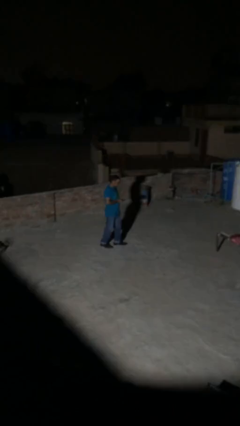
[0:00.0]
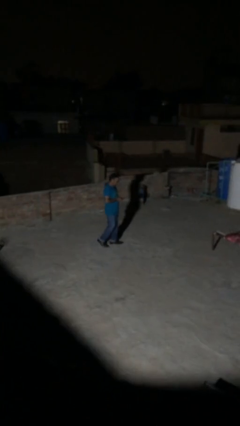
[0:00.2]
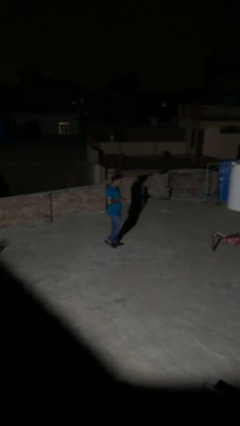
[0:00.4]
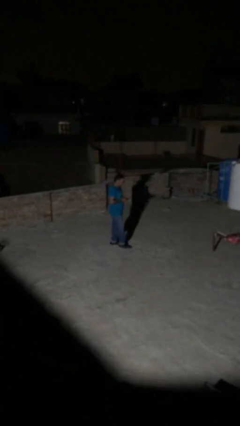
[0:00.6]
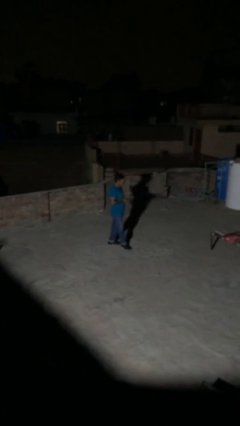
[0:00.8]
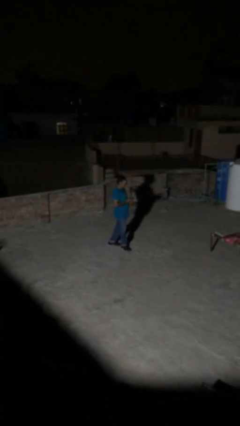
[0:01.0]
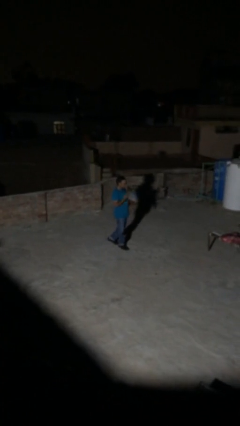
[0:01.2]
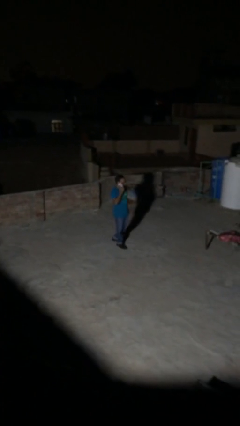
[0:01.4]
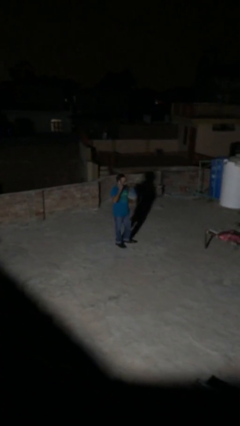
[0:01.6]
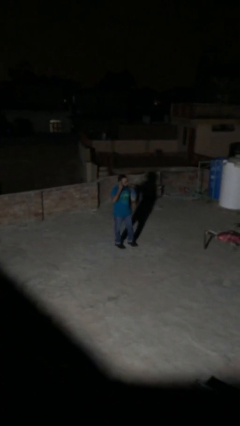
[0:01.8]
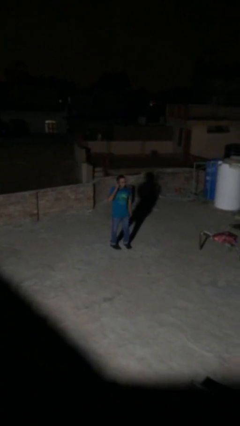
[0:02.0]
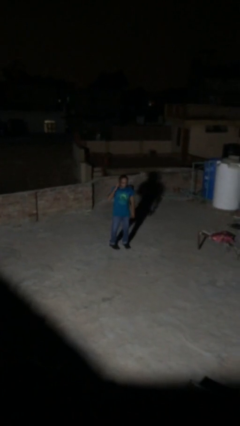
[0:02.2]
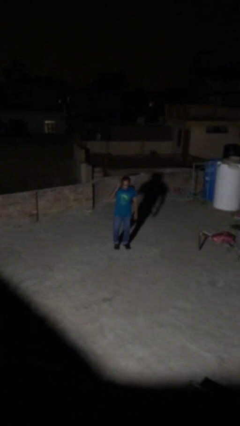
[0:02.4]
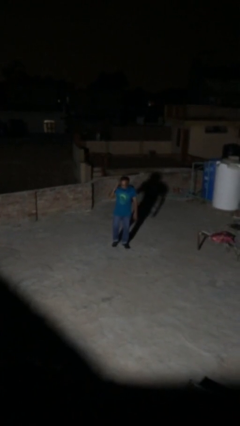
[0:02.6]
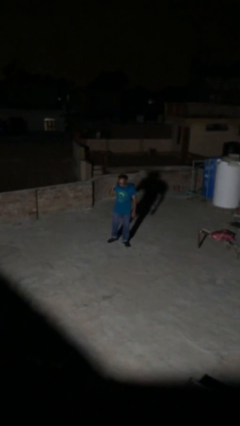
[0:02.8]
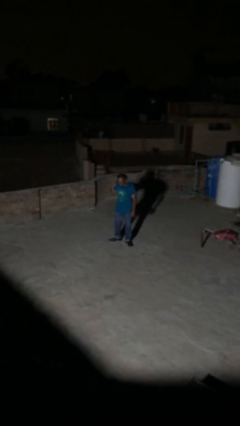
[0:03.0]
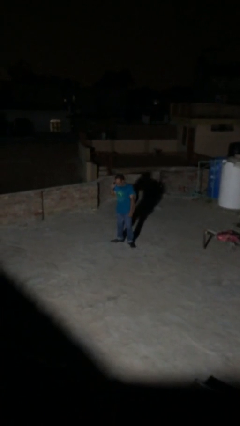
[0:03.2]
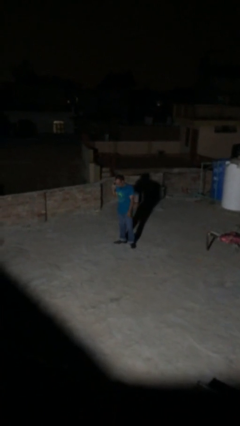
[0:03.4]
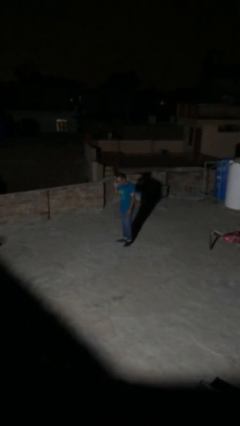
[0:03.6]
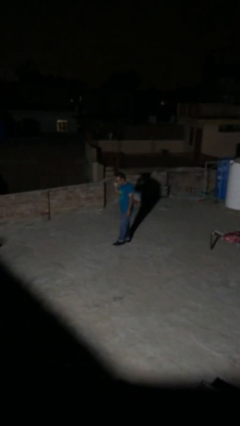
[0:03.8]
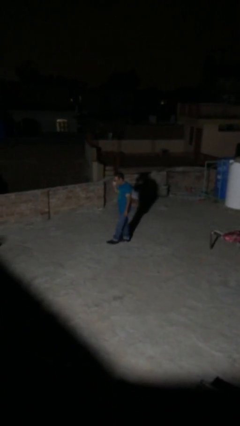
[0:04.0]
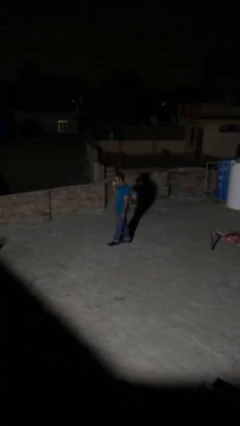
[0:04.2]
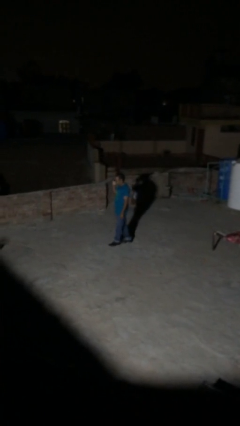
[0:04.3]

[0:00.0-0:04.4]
person talks on phone

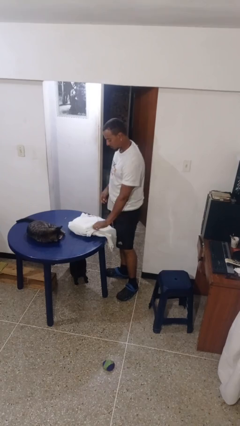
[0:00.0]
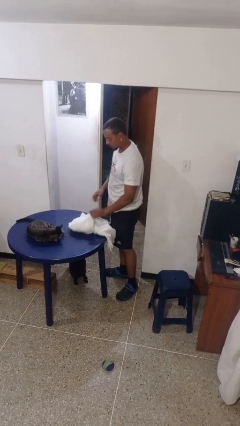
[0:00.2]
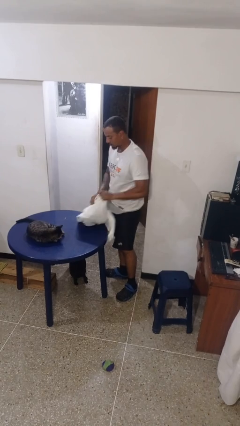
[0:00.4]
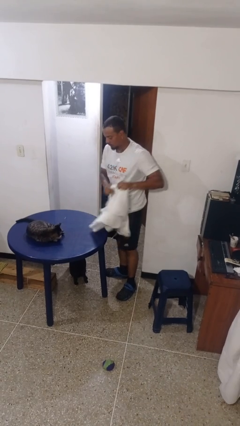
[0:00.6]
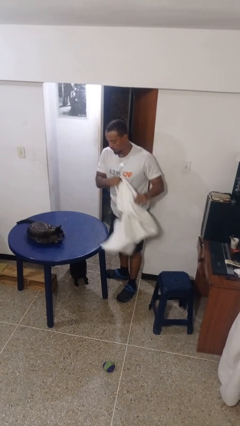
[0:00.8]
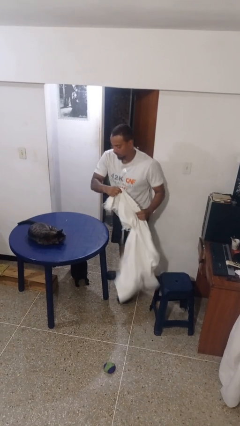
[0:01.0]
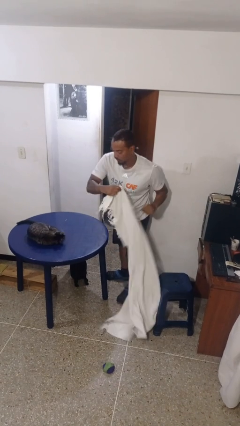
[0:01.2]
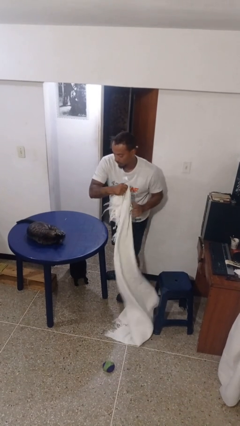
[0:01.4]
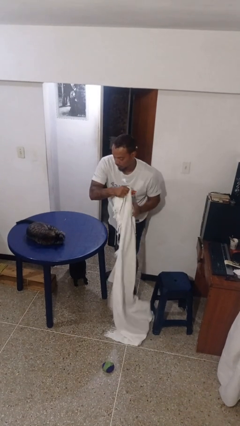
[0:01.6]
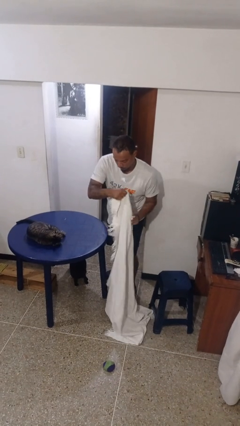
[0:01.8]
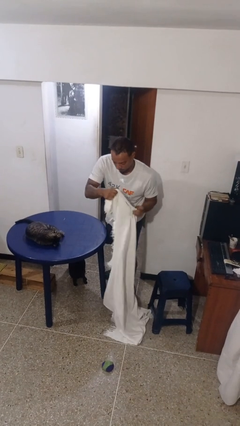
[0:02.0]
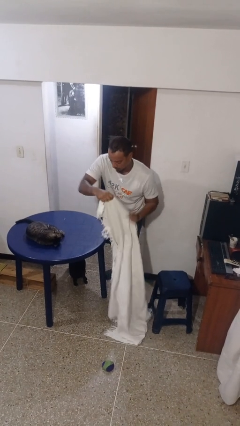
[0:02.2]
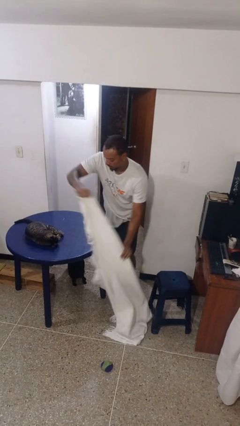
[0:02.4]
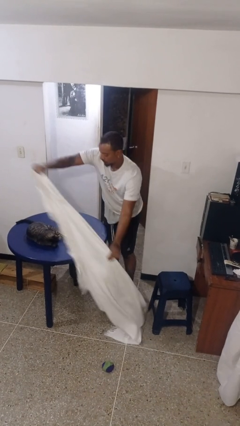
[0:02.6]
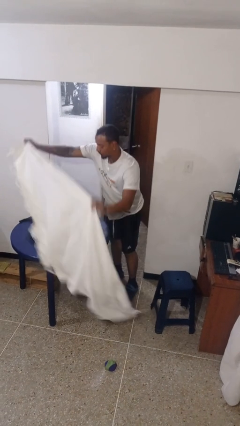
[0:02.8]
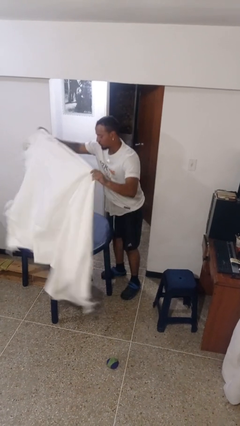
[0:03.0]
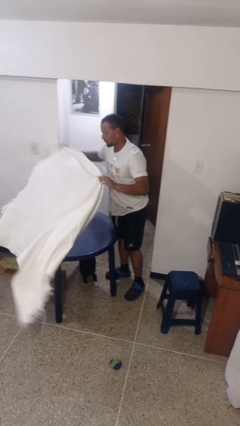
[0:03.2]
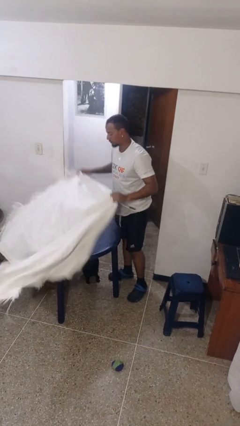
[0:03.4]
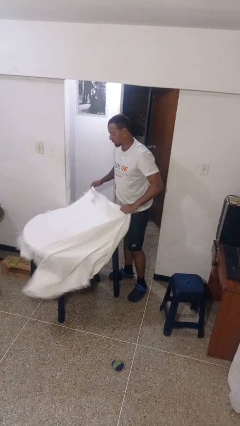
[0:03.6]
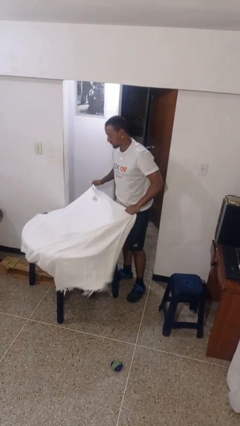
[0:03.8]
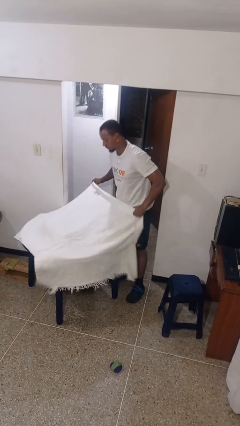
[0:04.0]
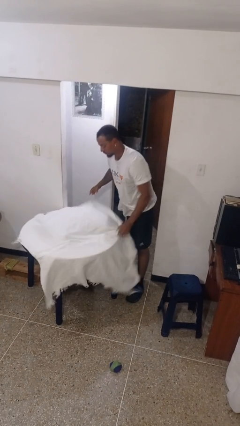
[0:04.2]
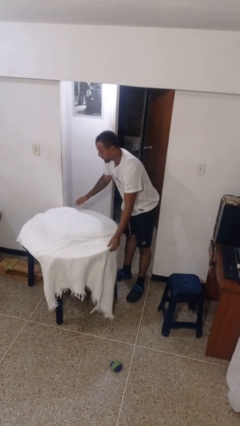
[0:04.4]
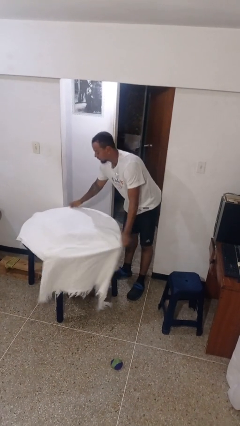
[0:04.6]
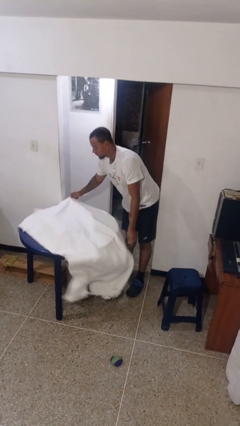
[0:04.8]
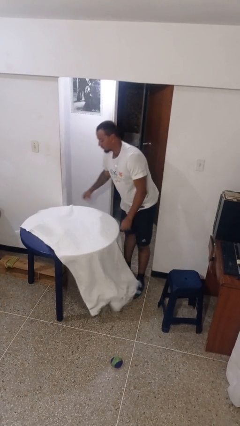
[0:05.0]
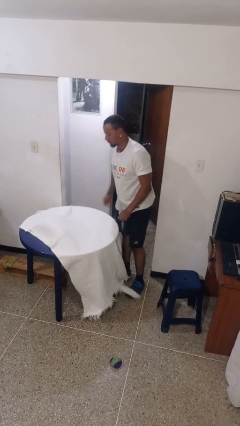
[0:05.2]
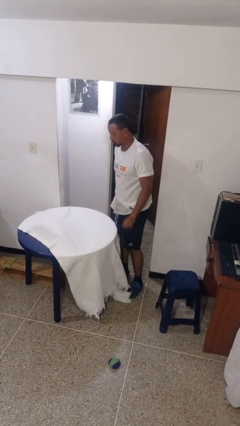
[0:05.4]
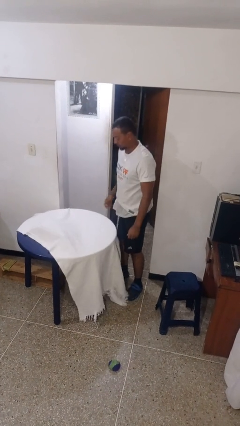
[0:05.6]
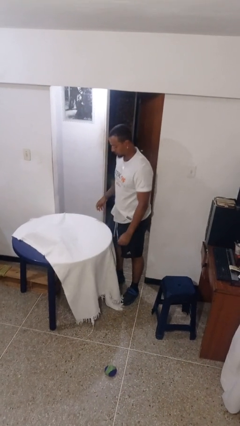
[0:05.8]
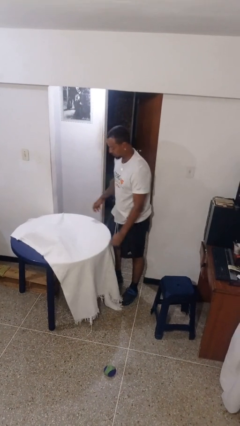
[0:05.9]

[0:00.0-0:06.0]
person spreads tablecloth

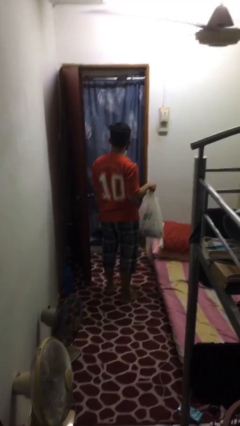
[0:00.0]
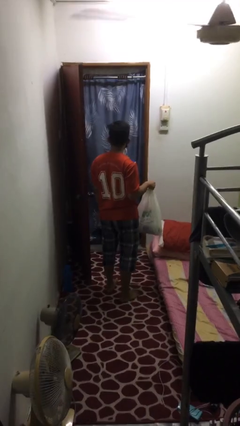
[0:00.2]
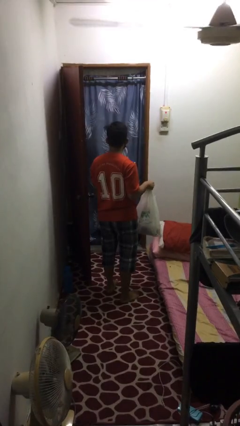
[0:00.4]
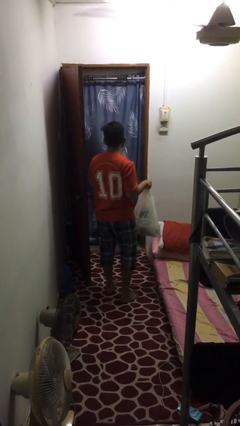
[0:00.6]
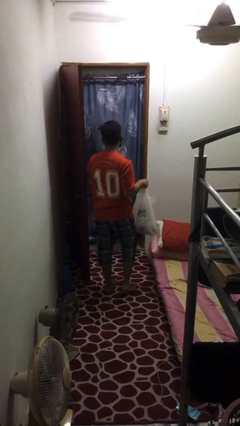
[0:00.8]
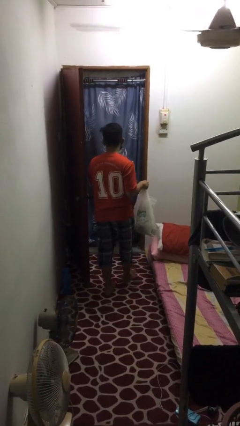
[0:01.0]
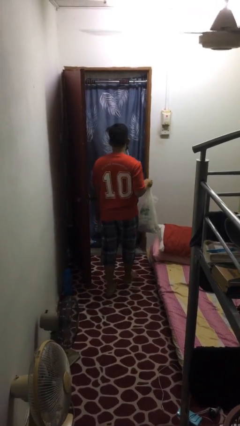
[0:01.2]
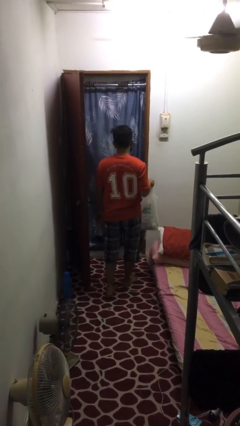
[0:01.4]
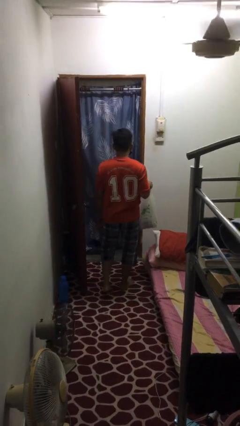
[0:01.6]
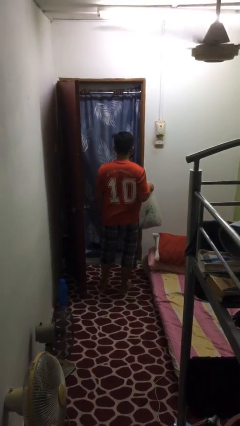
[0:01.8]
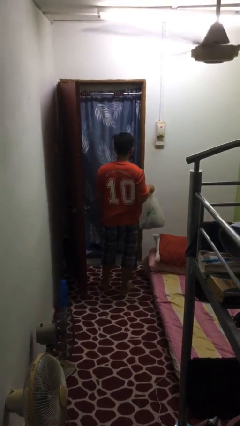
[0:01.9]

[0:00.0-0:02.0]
person carries groceries

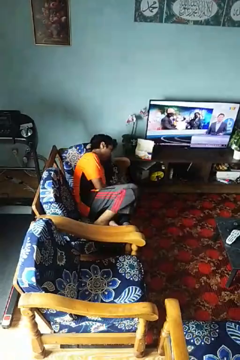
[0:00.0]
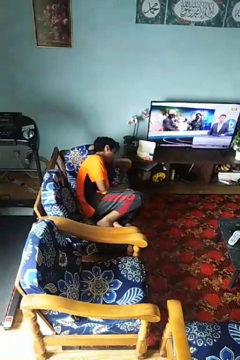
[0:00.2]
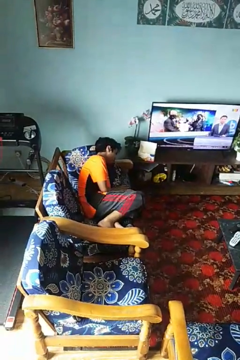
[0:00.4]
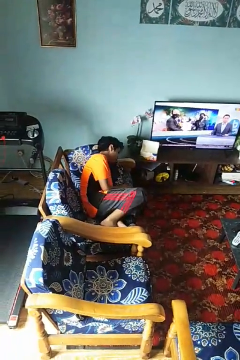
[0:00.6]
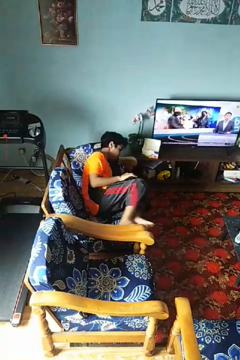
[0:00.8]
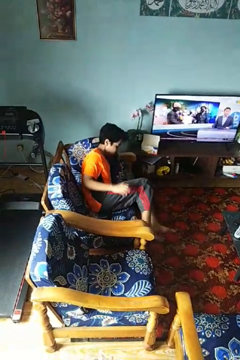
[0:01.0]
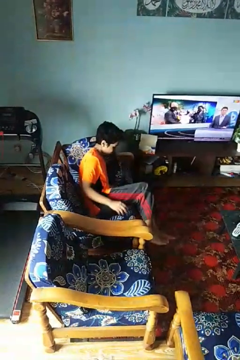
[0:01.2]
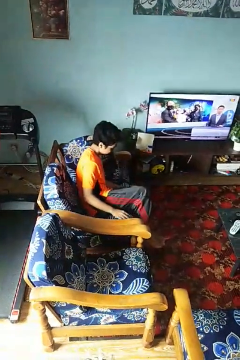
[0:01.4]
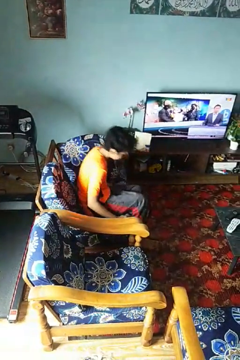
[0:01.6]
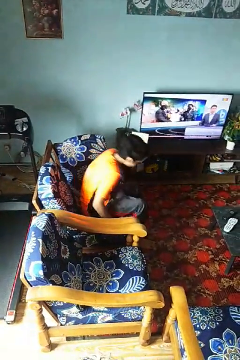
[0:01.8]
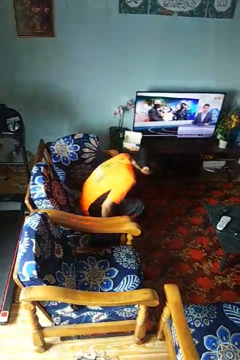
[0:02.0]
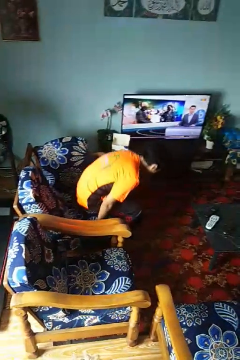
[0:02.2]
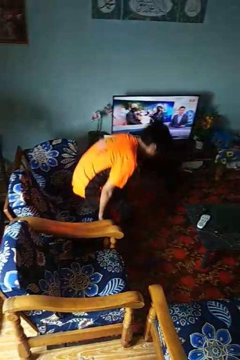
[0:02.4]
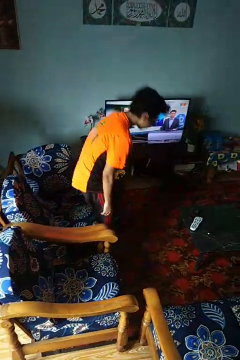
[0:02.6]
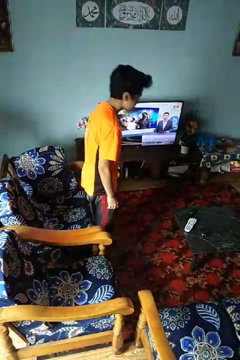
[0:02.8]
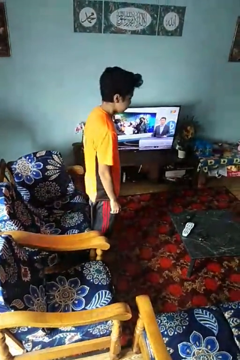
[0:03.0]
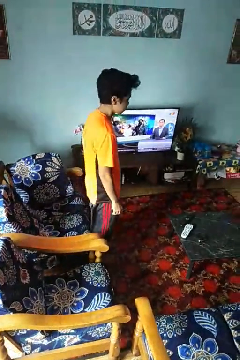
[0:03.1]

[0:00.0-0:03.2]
person stands up

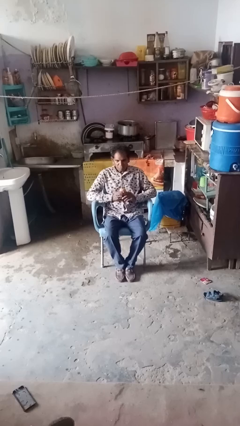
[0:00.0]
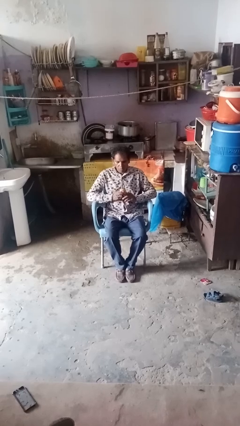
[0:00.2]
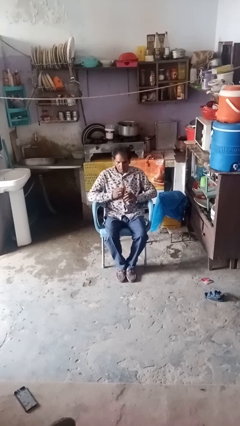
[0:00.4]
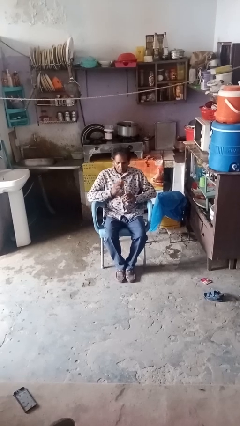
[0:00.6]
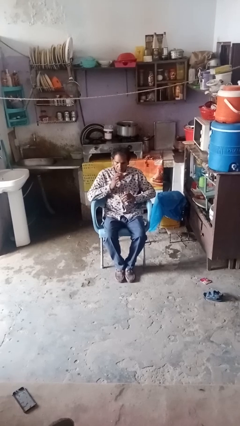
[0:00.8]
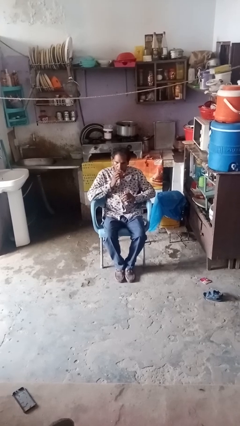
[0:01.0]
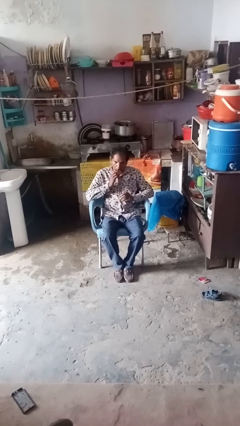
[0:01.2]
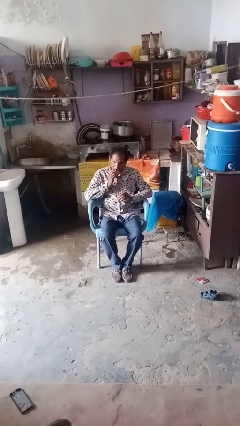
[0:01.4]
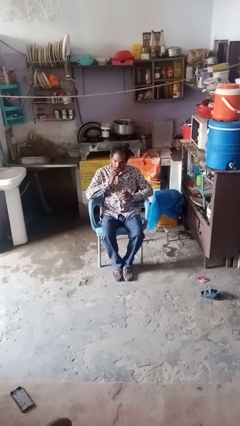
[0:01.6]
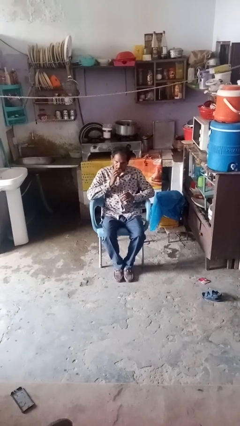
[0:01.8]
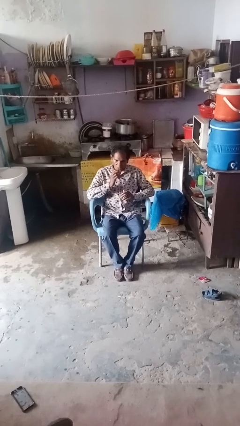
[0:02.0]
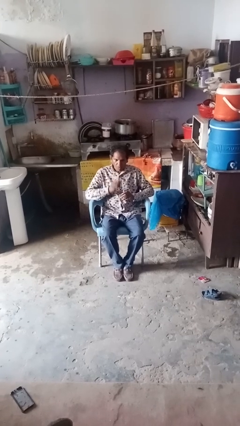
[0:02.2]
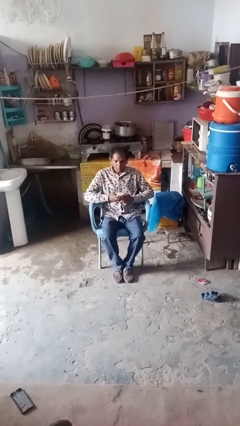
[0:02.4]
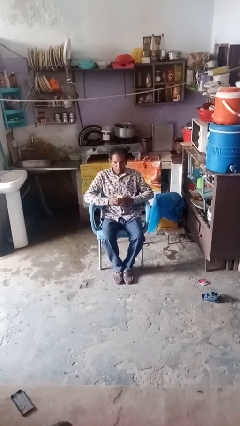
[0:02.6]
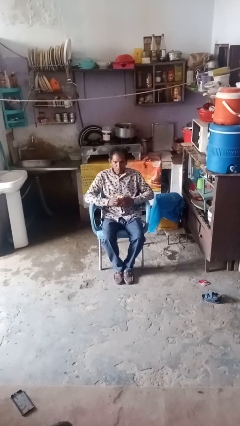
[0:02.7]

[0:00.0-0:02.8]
person eats apple

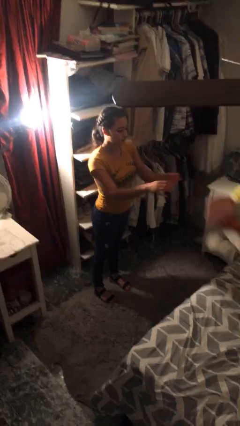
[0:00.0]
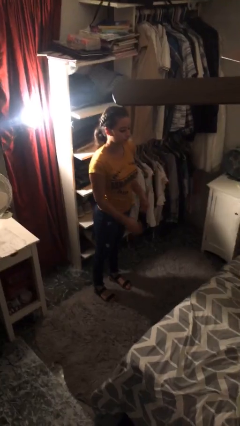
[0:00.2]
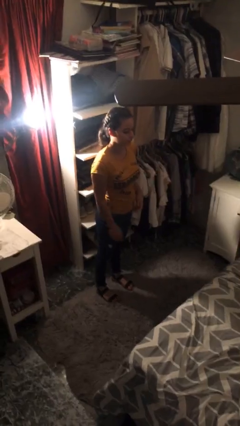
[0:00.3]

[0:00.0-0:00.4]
person throws object on bed
